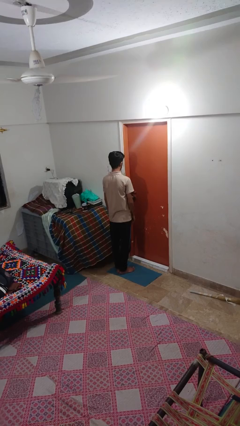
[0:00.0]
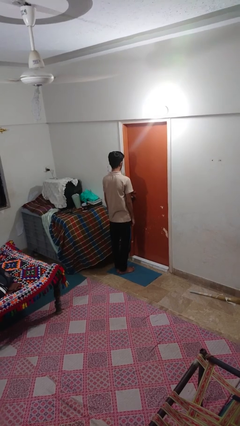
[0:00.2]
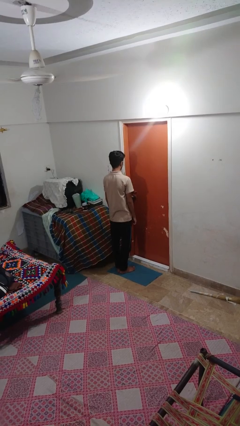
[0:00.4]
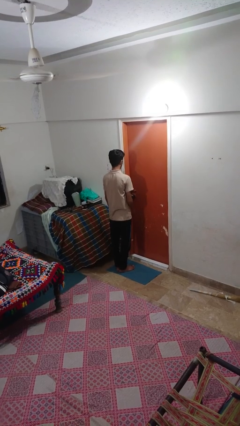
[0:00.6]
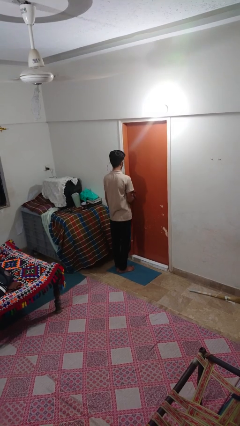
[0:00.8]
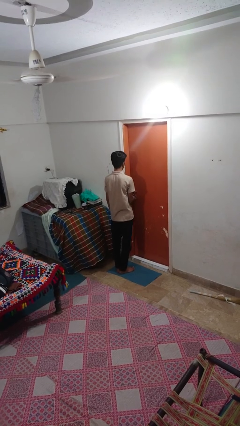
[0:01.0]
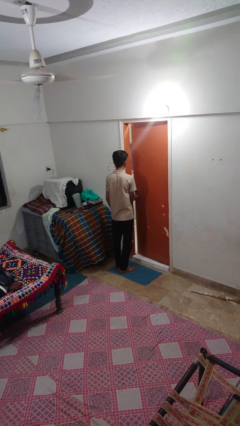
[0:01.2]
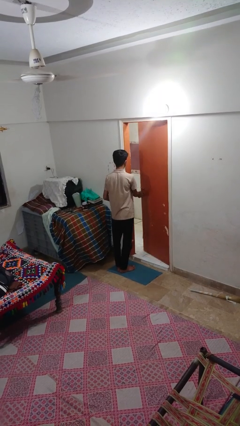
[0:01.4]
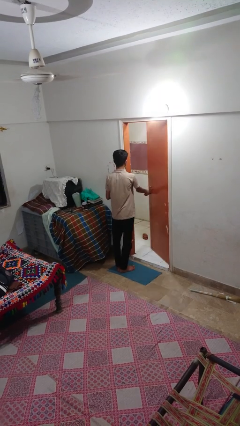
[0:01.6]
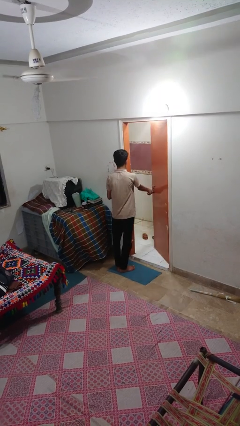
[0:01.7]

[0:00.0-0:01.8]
person opens facility door

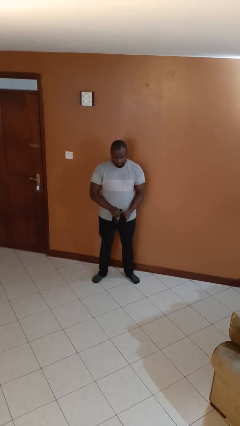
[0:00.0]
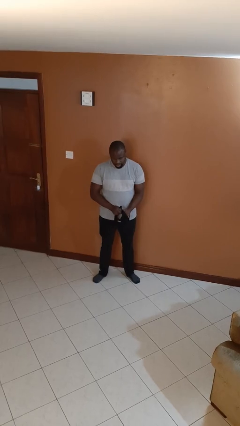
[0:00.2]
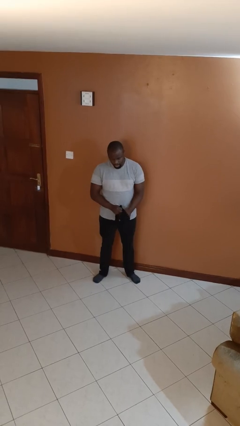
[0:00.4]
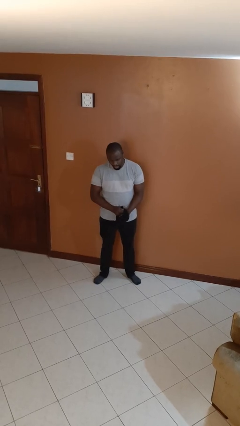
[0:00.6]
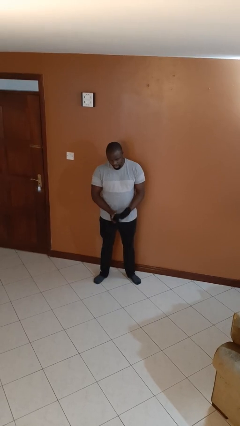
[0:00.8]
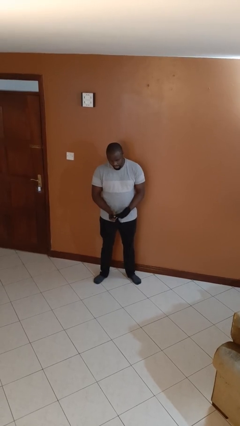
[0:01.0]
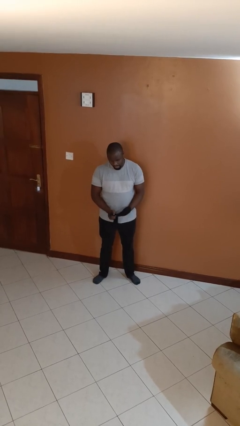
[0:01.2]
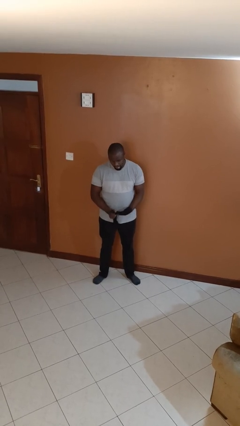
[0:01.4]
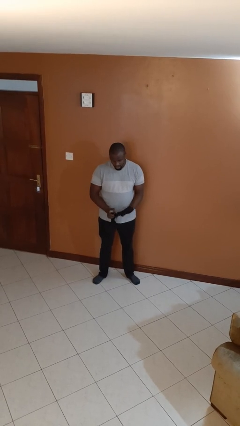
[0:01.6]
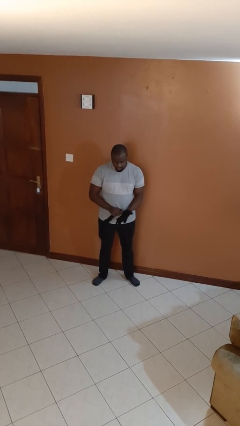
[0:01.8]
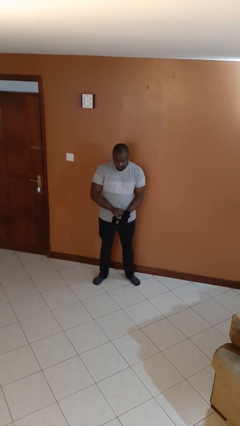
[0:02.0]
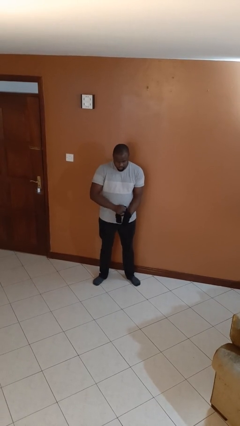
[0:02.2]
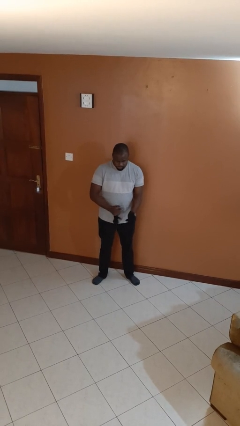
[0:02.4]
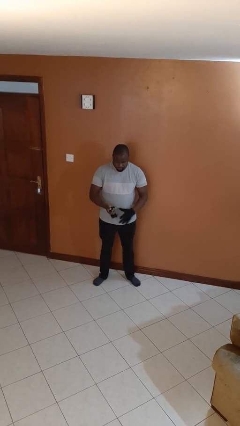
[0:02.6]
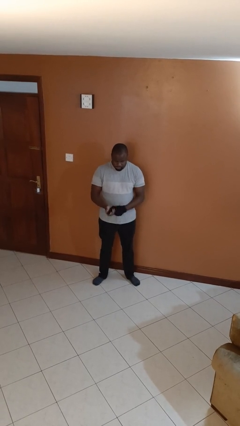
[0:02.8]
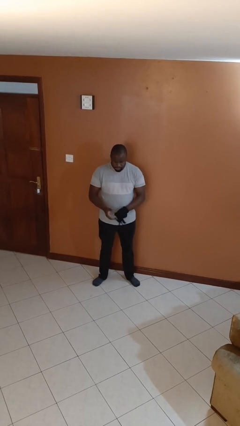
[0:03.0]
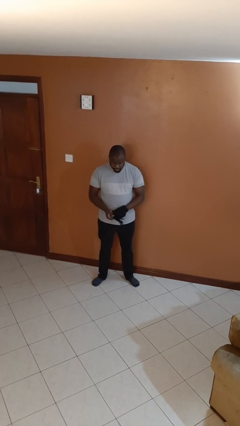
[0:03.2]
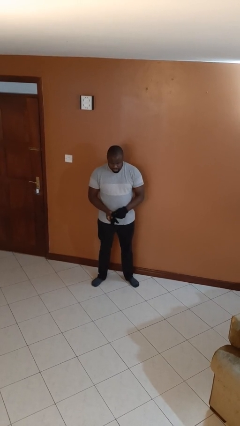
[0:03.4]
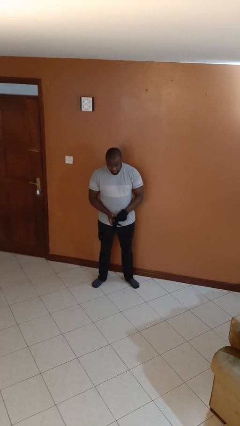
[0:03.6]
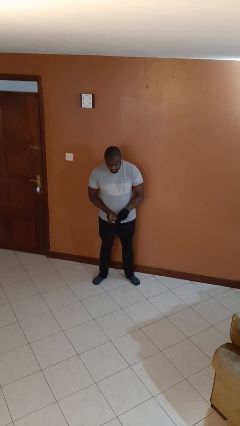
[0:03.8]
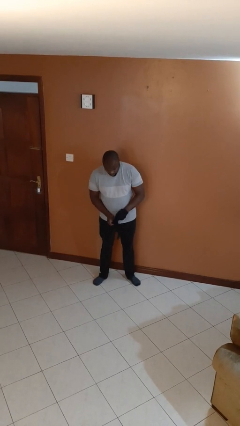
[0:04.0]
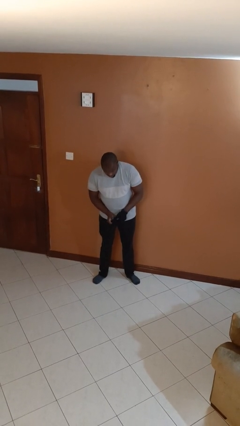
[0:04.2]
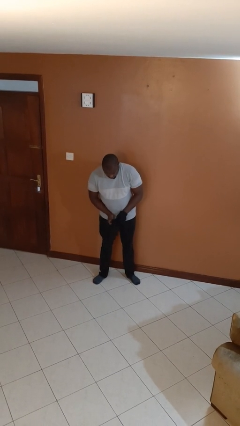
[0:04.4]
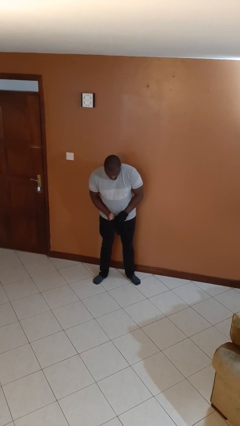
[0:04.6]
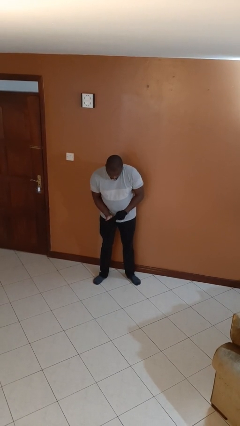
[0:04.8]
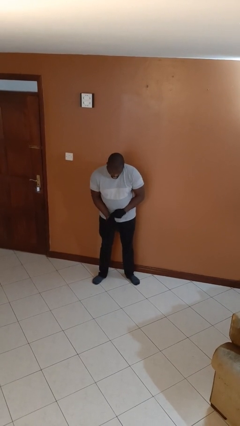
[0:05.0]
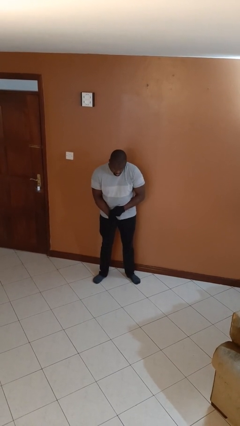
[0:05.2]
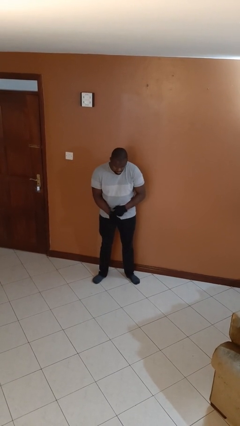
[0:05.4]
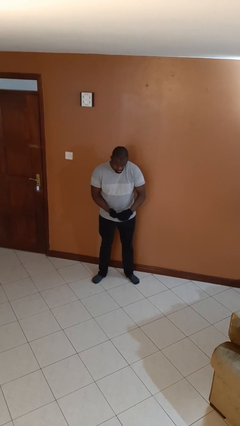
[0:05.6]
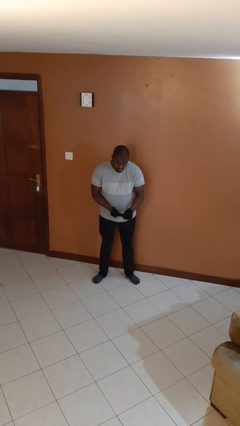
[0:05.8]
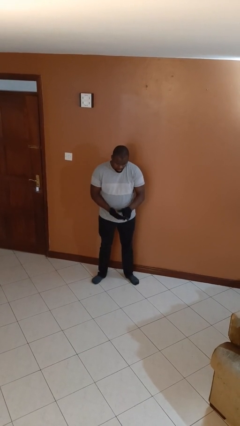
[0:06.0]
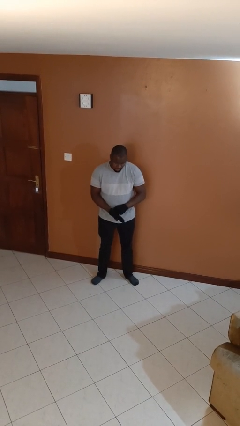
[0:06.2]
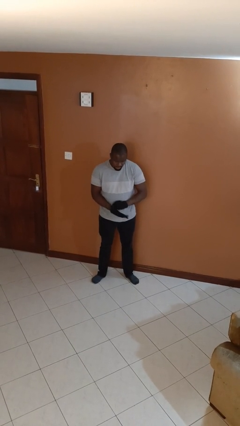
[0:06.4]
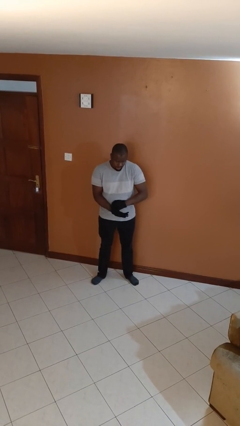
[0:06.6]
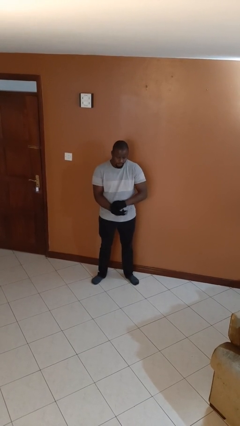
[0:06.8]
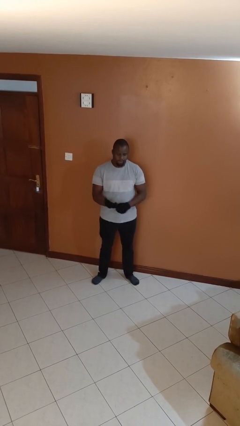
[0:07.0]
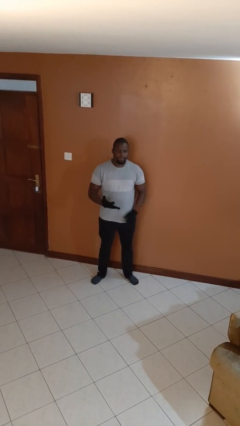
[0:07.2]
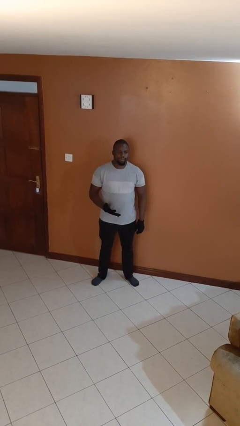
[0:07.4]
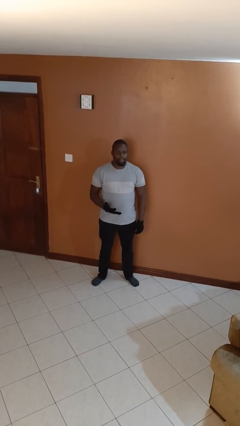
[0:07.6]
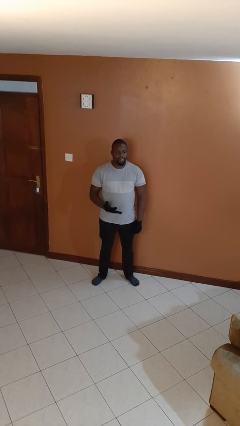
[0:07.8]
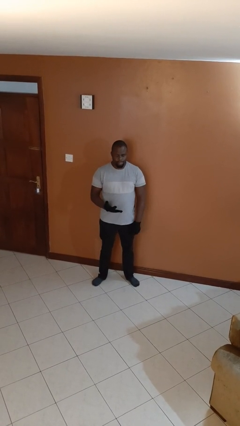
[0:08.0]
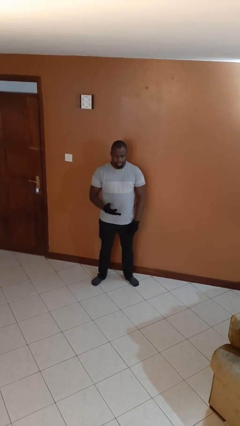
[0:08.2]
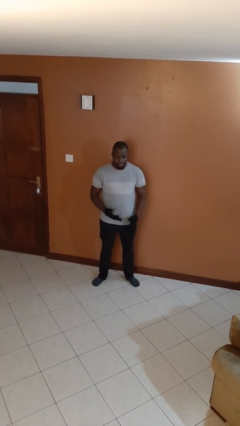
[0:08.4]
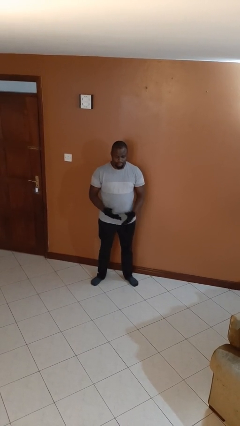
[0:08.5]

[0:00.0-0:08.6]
person puts on gloves

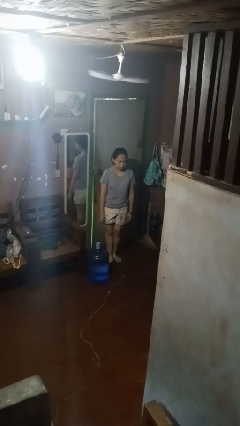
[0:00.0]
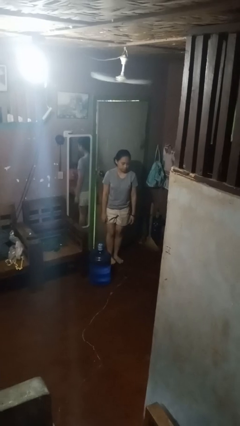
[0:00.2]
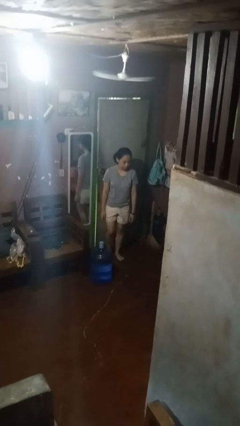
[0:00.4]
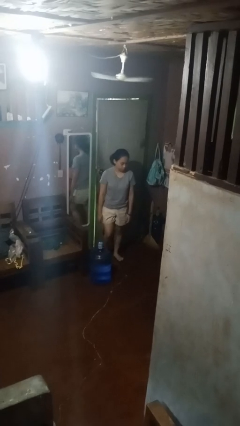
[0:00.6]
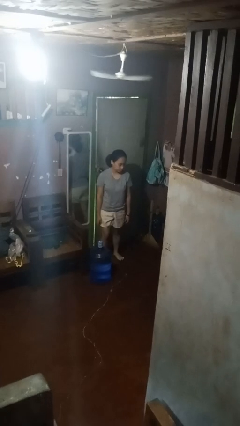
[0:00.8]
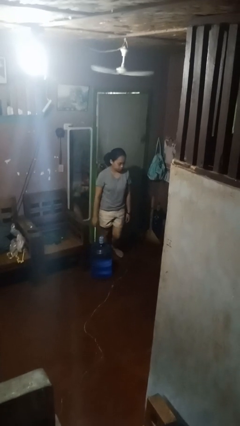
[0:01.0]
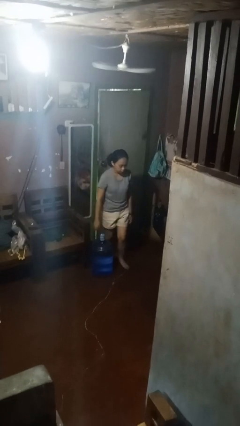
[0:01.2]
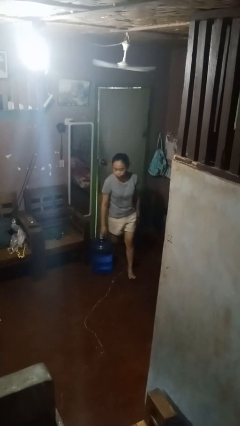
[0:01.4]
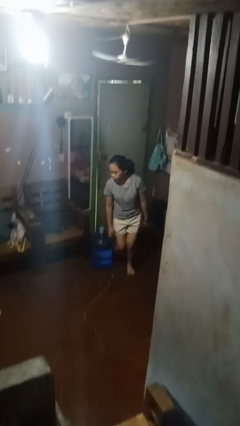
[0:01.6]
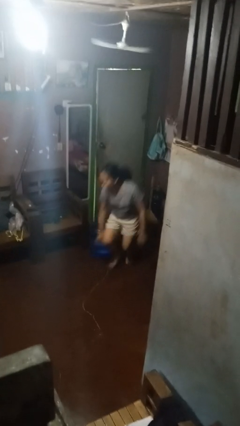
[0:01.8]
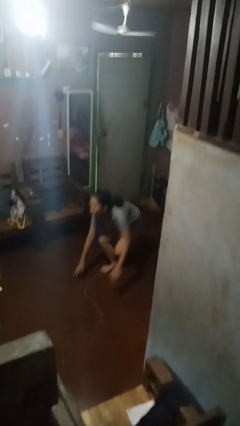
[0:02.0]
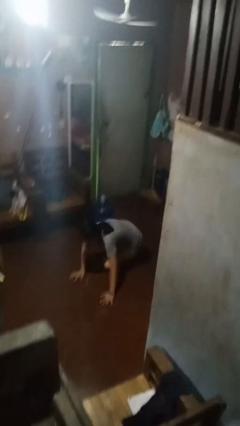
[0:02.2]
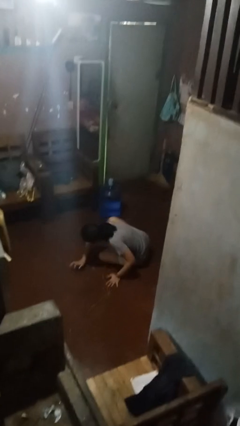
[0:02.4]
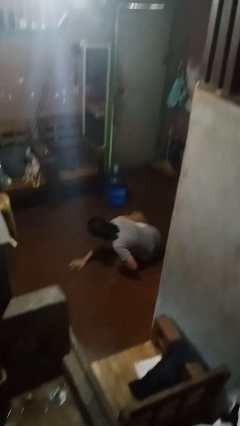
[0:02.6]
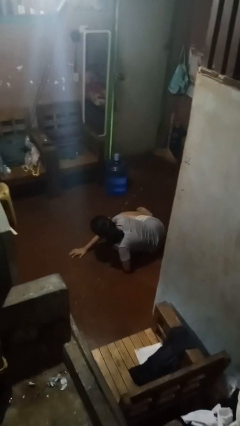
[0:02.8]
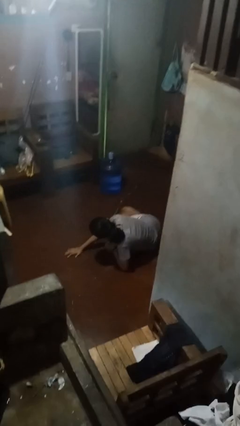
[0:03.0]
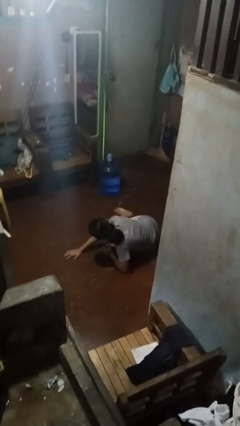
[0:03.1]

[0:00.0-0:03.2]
person trips on object on floor

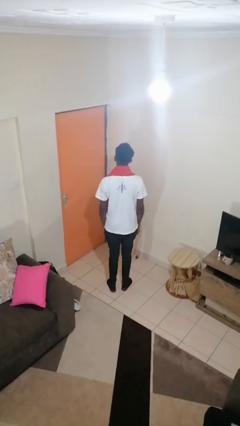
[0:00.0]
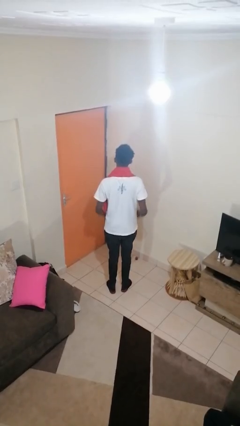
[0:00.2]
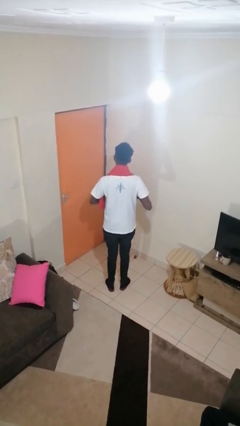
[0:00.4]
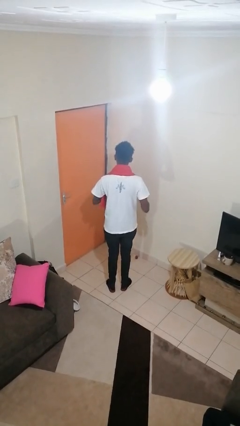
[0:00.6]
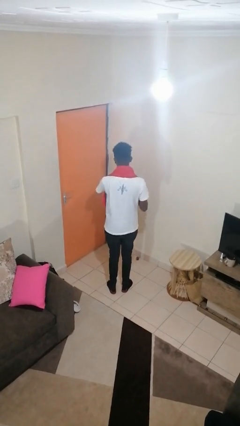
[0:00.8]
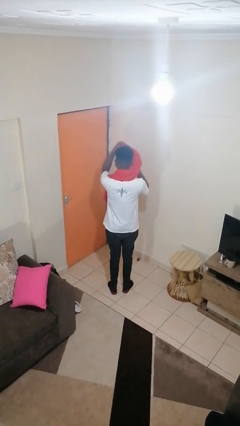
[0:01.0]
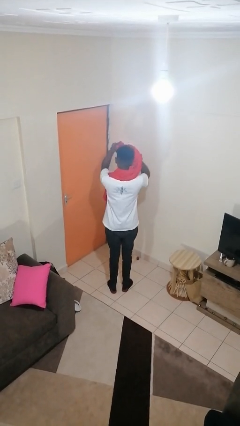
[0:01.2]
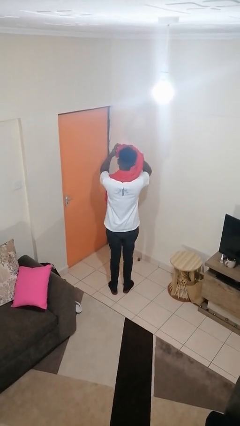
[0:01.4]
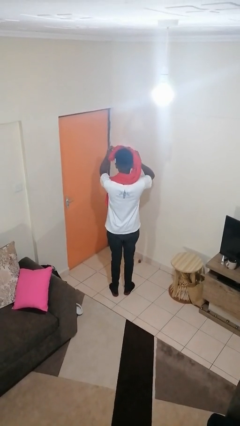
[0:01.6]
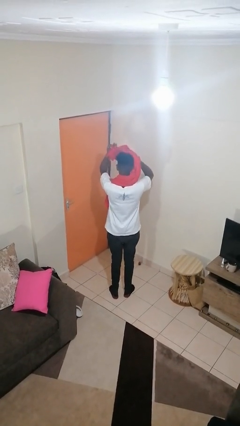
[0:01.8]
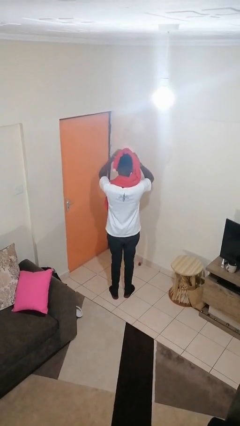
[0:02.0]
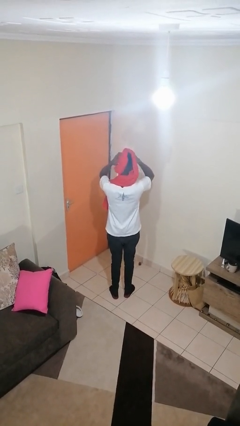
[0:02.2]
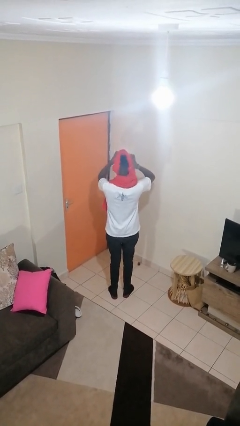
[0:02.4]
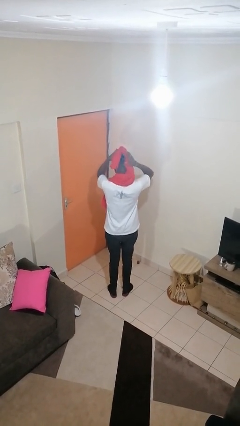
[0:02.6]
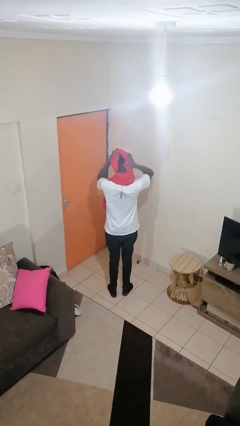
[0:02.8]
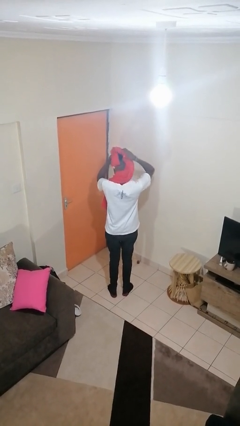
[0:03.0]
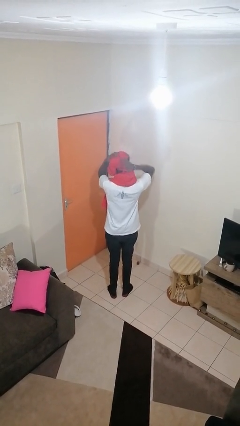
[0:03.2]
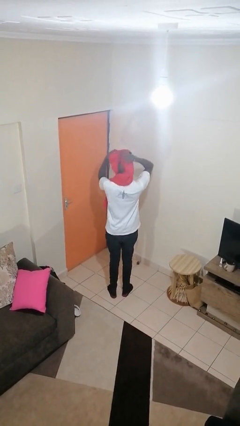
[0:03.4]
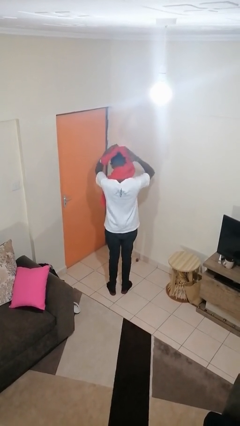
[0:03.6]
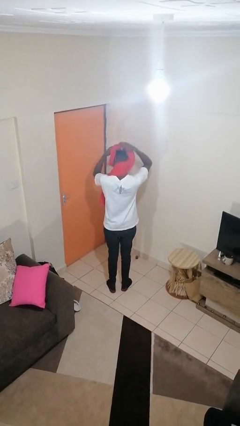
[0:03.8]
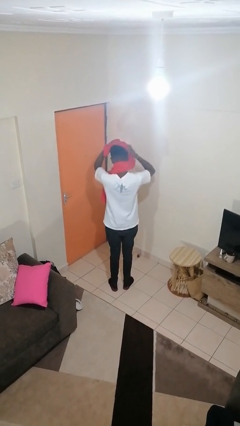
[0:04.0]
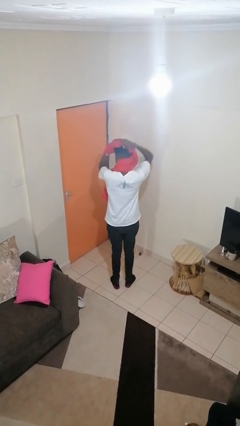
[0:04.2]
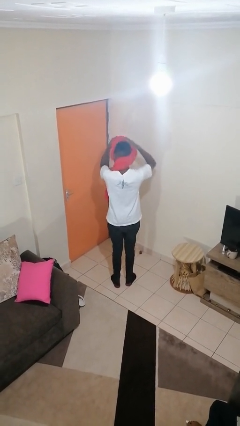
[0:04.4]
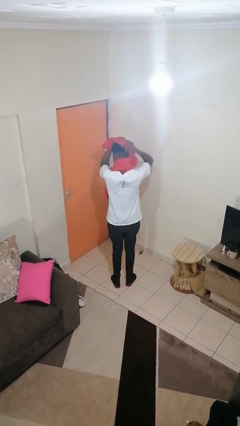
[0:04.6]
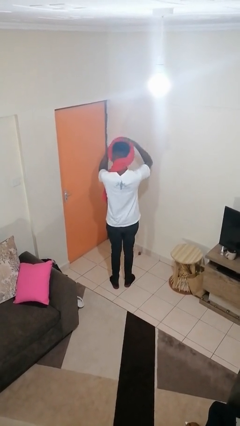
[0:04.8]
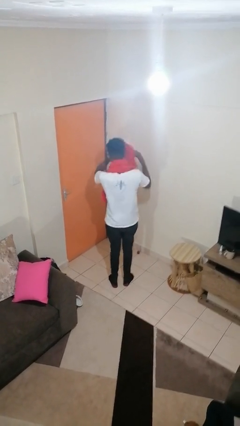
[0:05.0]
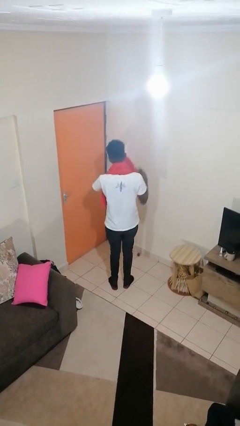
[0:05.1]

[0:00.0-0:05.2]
person dries hair with towel
